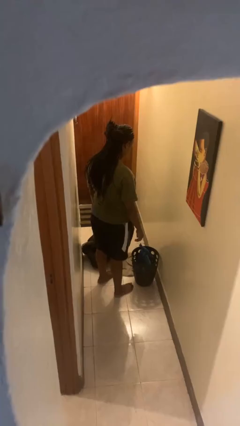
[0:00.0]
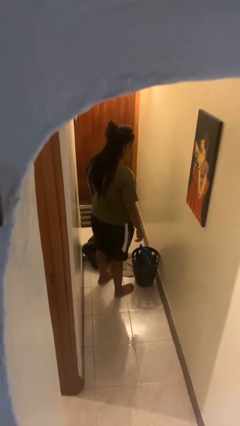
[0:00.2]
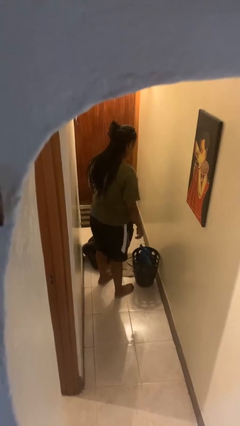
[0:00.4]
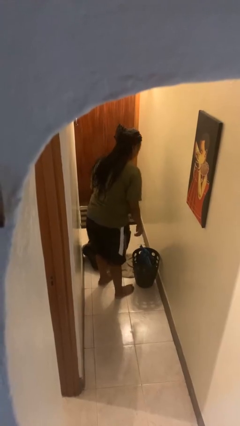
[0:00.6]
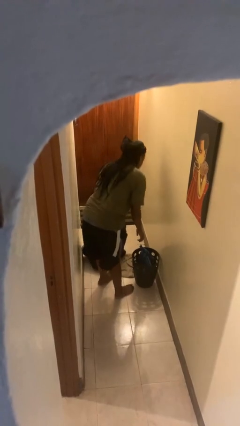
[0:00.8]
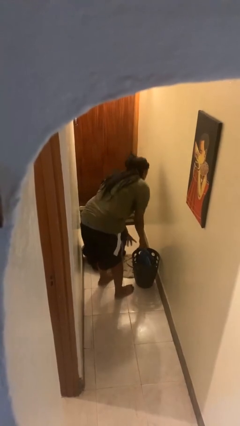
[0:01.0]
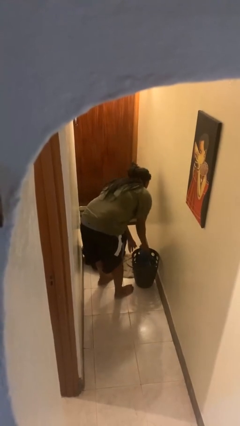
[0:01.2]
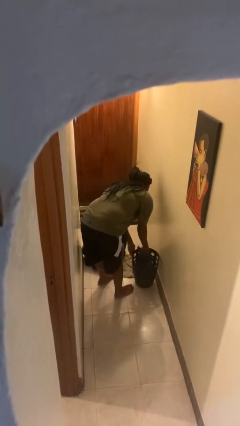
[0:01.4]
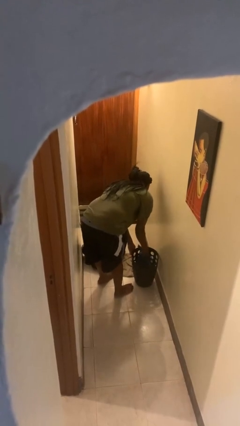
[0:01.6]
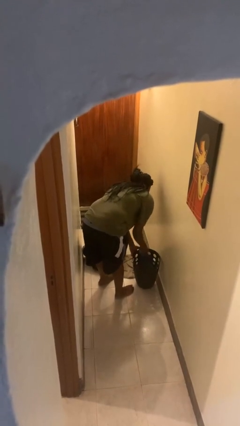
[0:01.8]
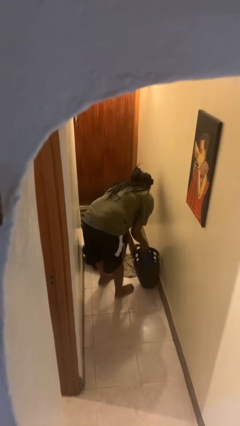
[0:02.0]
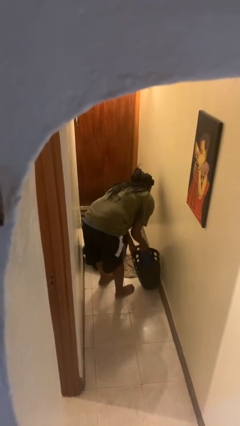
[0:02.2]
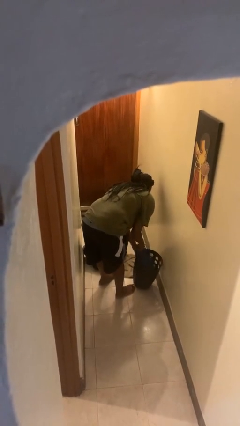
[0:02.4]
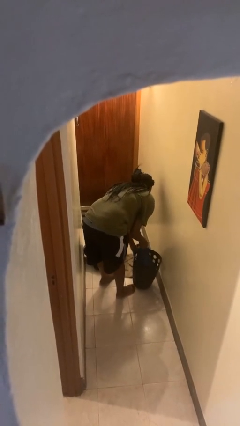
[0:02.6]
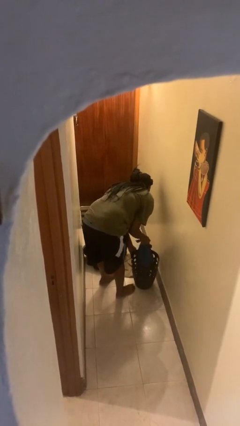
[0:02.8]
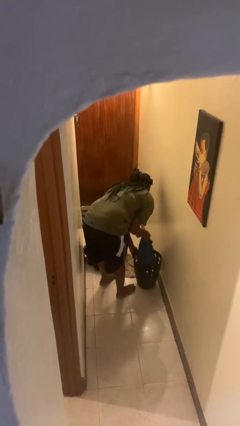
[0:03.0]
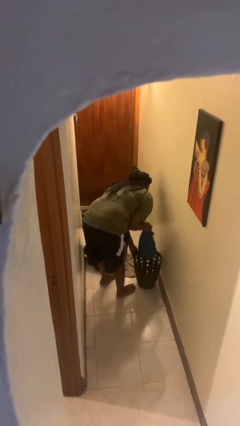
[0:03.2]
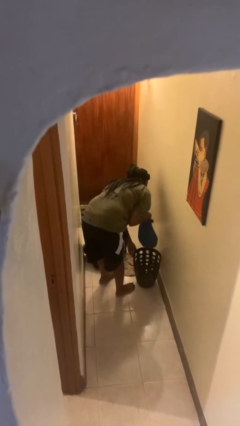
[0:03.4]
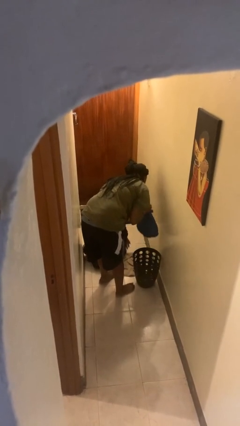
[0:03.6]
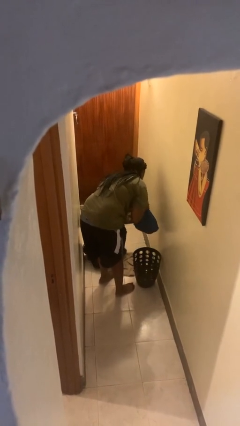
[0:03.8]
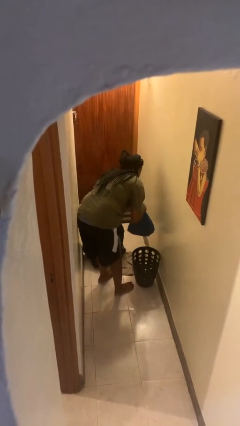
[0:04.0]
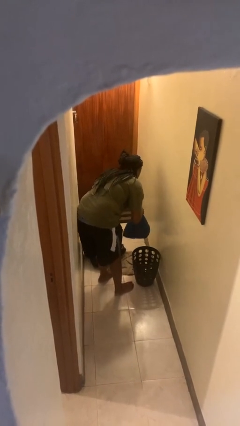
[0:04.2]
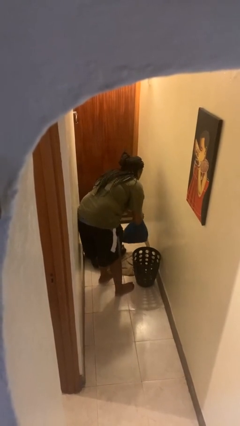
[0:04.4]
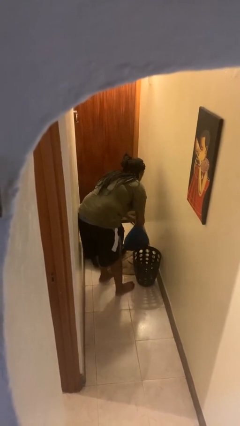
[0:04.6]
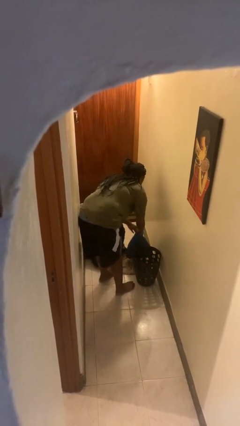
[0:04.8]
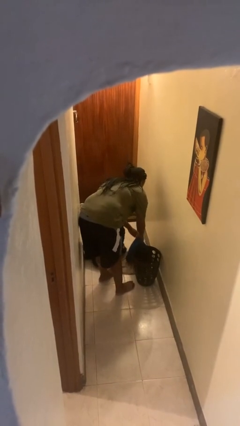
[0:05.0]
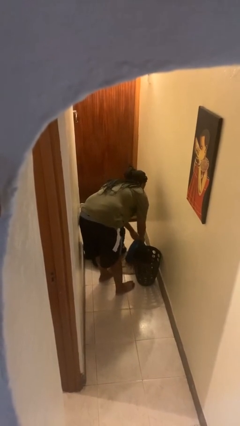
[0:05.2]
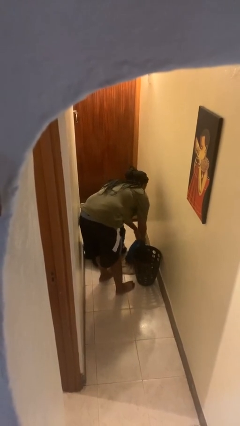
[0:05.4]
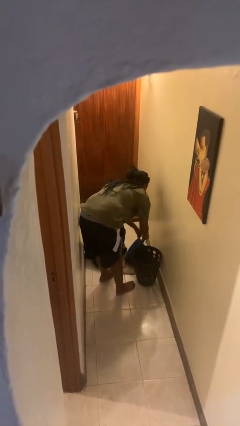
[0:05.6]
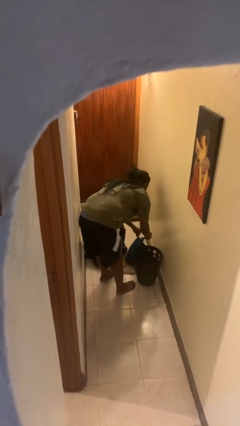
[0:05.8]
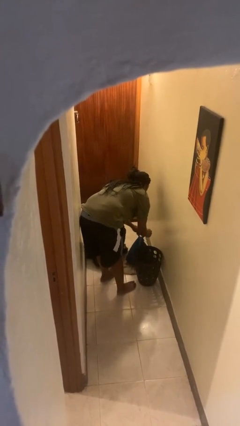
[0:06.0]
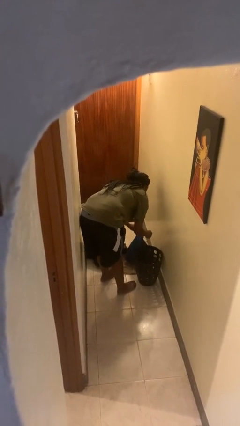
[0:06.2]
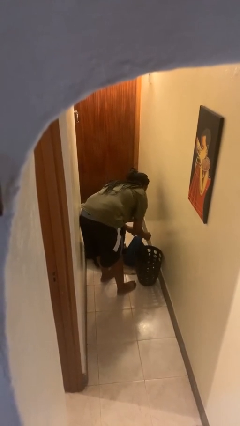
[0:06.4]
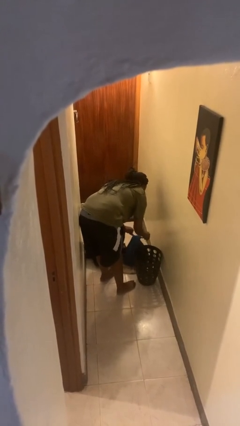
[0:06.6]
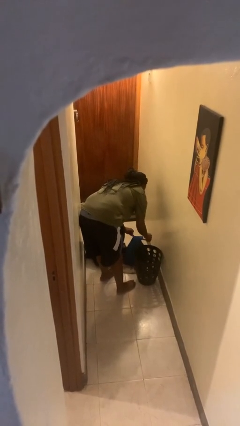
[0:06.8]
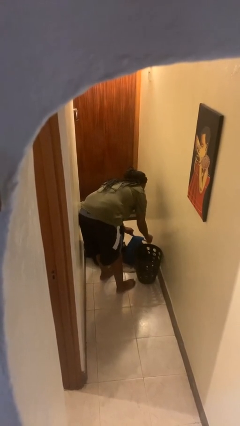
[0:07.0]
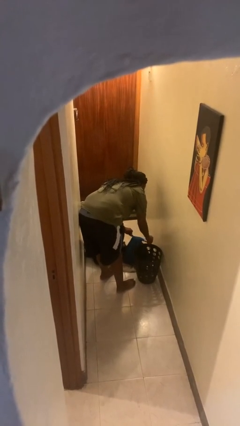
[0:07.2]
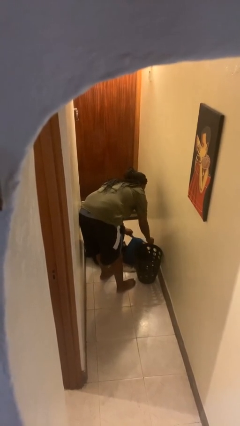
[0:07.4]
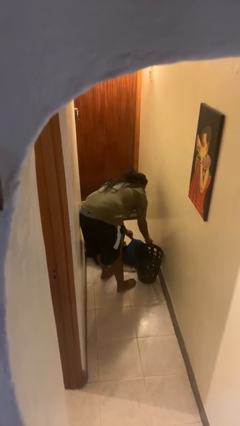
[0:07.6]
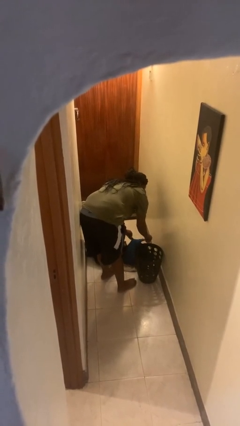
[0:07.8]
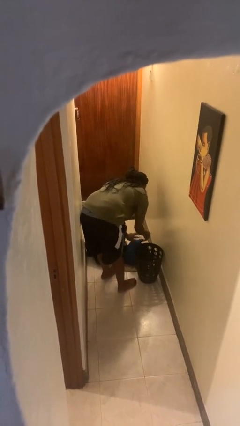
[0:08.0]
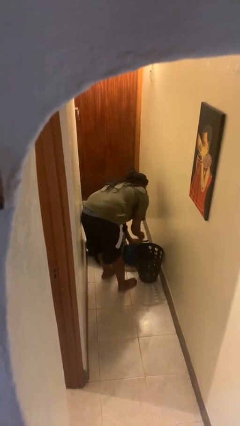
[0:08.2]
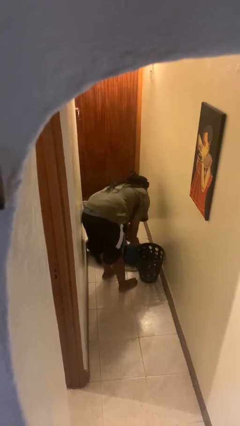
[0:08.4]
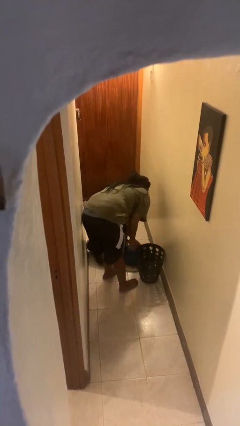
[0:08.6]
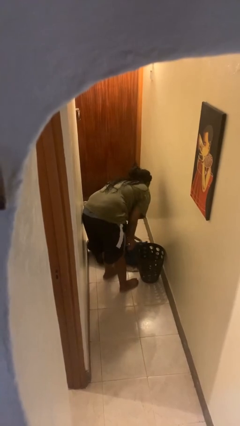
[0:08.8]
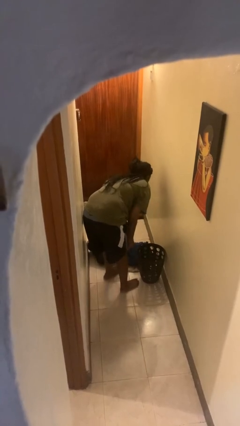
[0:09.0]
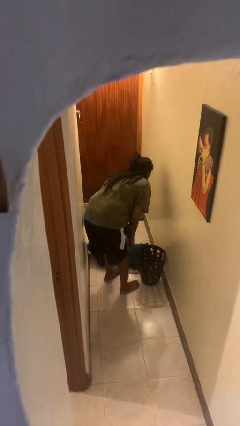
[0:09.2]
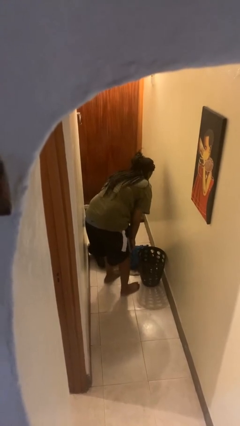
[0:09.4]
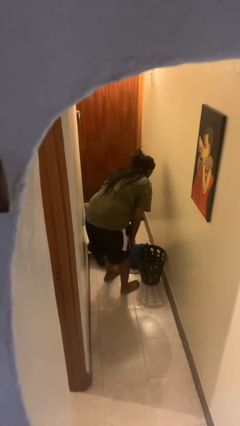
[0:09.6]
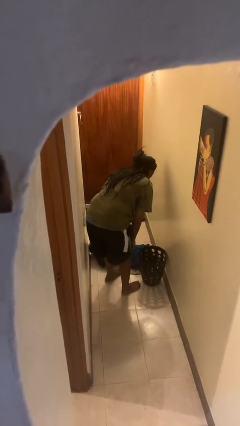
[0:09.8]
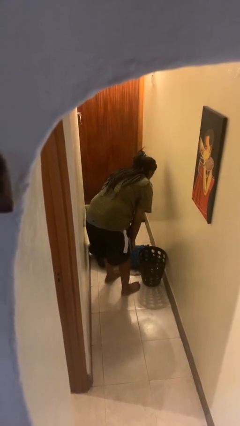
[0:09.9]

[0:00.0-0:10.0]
person removes trashbag from trashcan

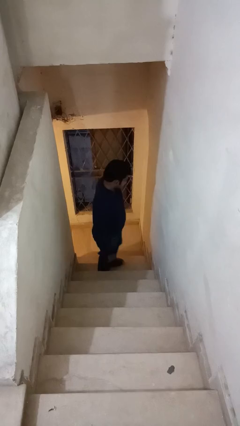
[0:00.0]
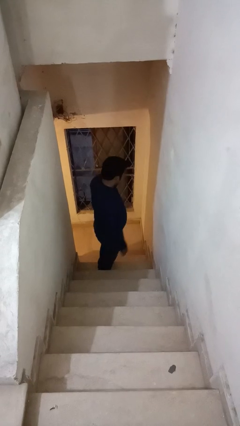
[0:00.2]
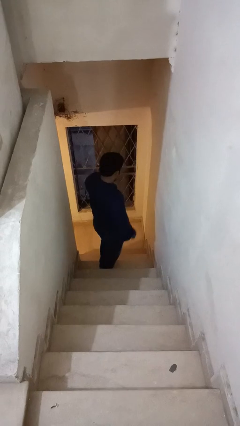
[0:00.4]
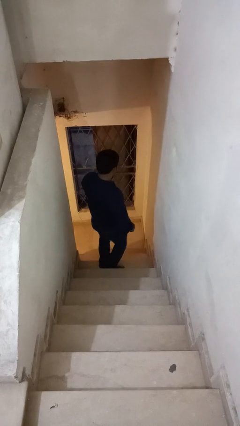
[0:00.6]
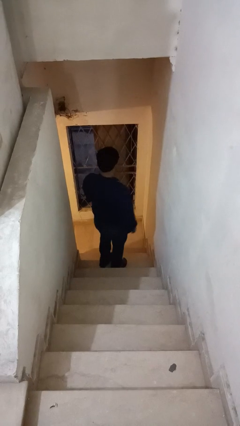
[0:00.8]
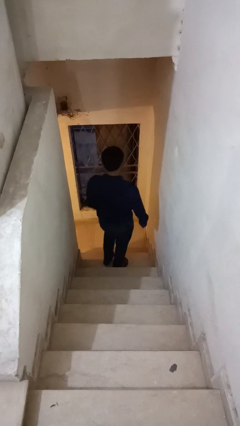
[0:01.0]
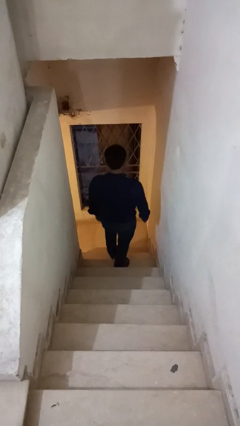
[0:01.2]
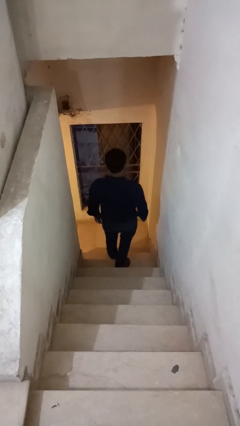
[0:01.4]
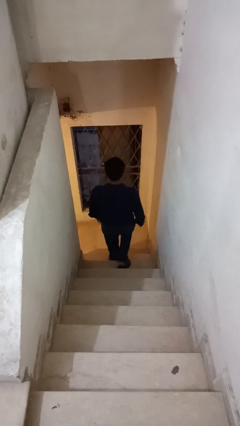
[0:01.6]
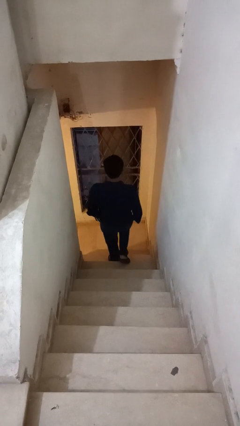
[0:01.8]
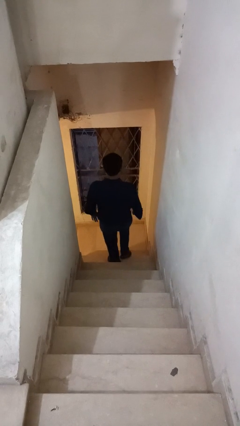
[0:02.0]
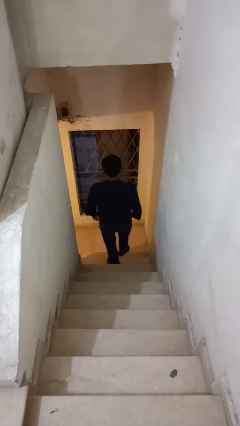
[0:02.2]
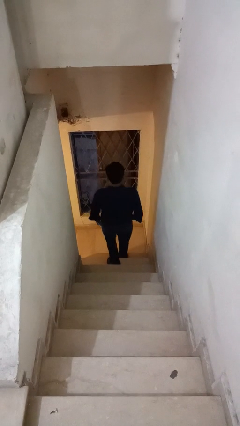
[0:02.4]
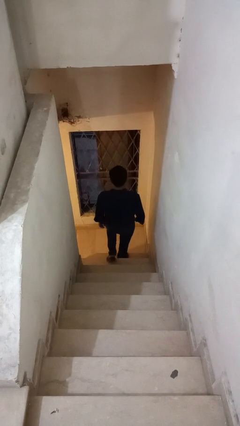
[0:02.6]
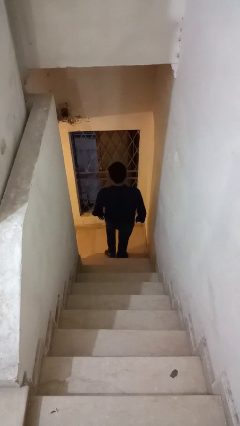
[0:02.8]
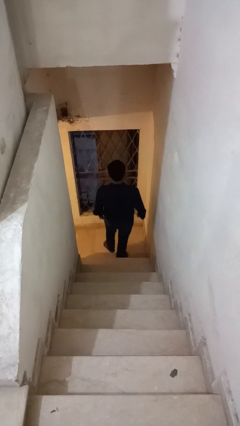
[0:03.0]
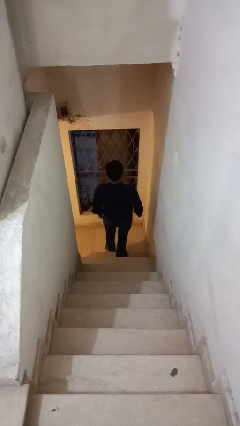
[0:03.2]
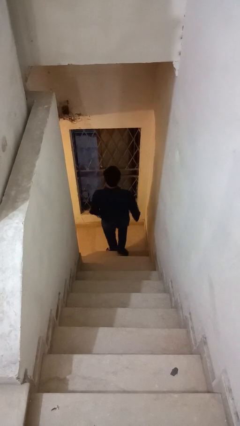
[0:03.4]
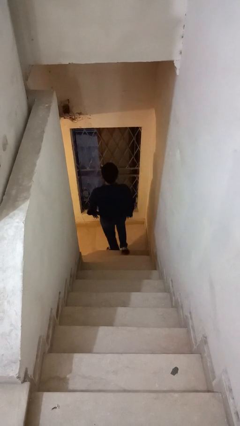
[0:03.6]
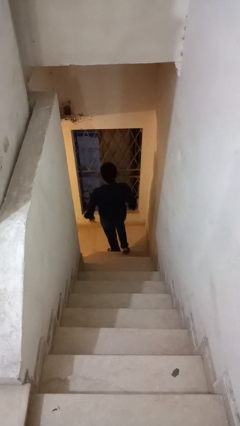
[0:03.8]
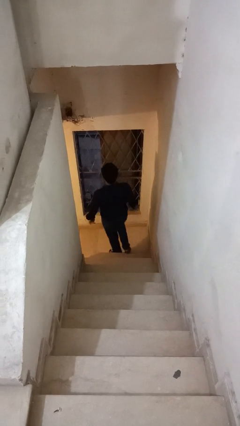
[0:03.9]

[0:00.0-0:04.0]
person climbs down stairs

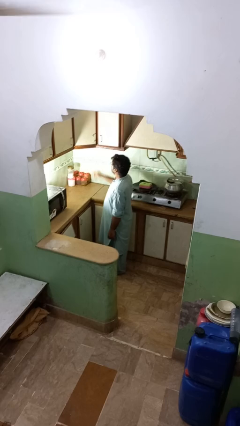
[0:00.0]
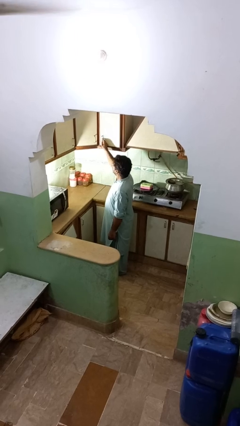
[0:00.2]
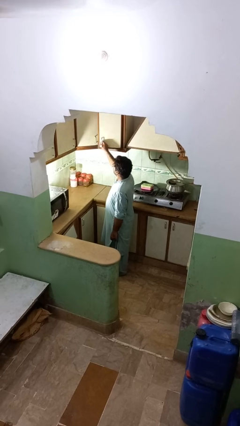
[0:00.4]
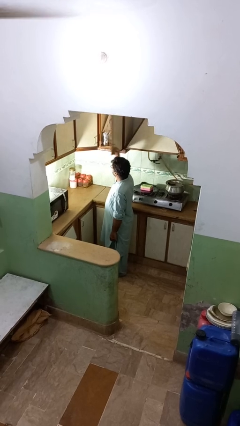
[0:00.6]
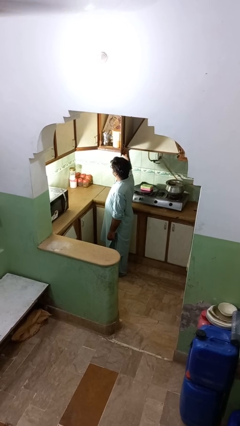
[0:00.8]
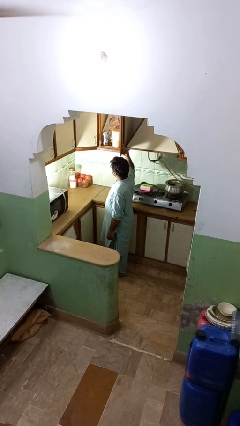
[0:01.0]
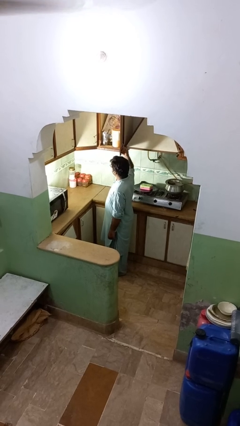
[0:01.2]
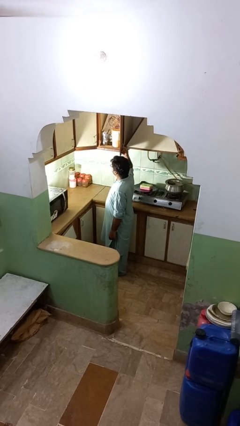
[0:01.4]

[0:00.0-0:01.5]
person opens kitchen drawer

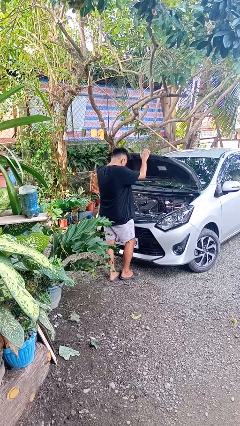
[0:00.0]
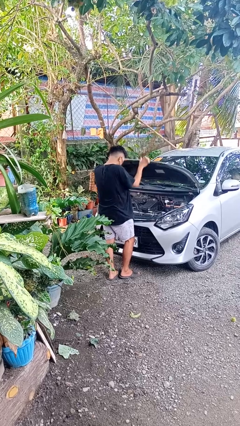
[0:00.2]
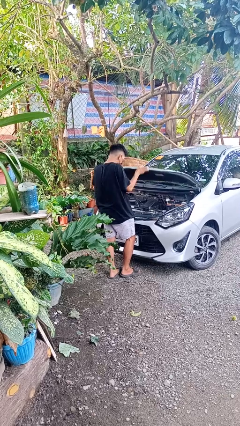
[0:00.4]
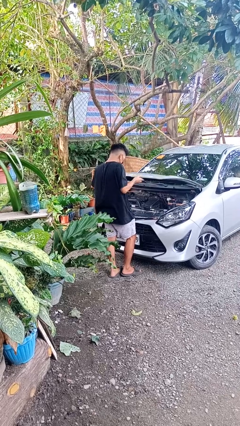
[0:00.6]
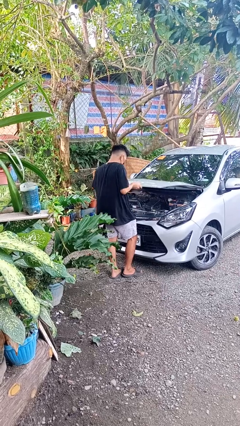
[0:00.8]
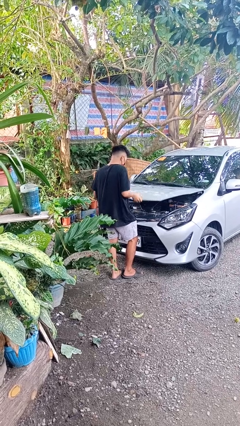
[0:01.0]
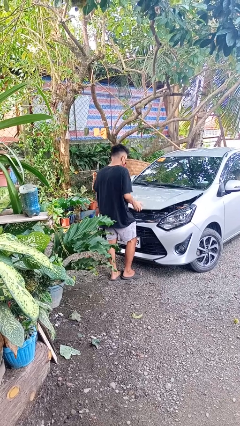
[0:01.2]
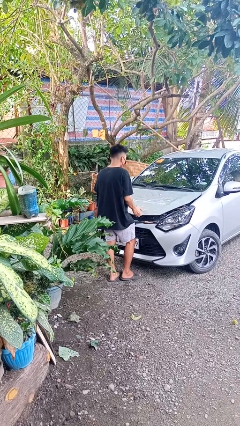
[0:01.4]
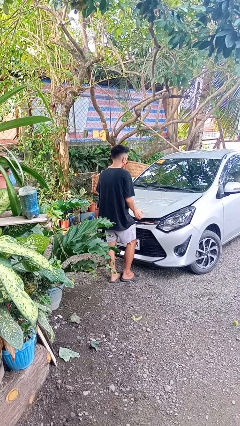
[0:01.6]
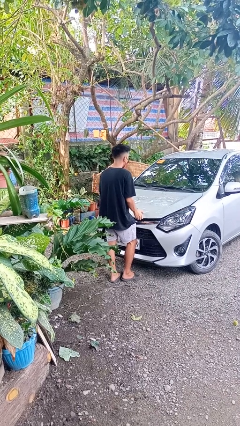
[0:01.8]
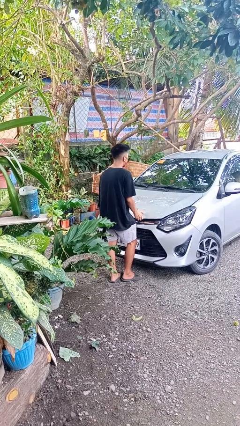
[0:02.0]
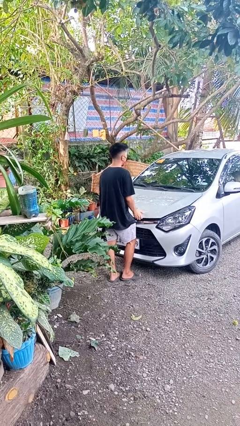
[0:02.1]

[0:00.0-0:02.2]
person closes car hood

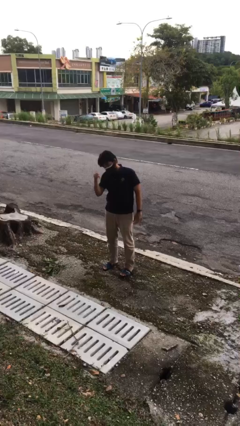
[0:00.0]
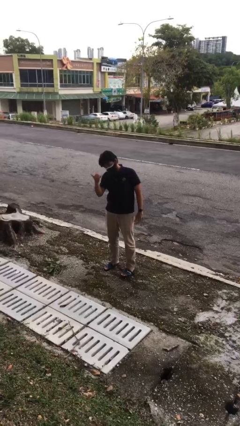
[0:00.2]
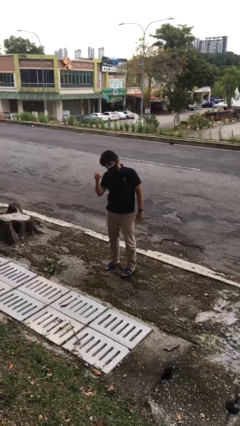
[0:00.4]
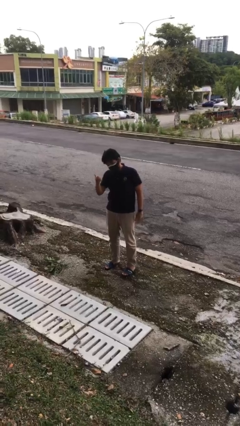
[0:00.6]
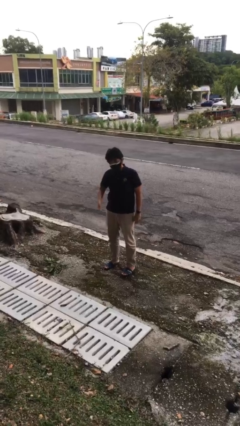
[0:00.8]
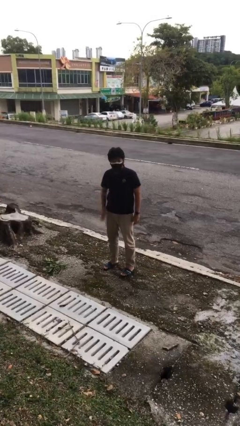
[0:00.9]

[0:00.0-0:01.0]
person gestures hang loose
